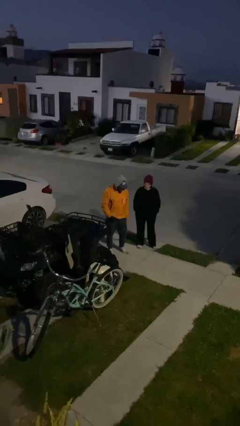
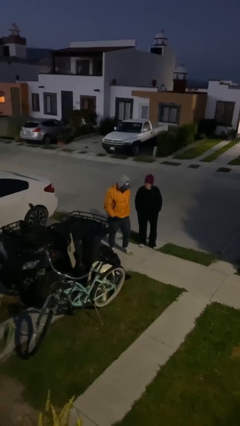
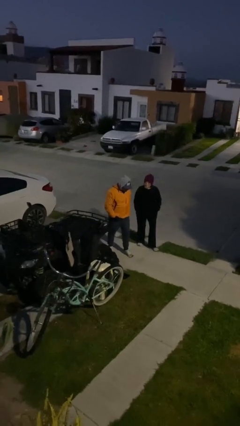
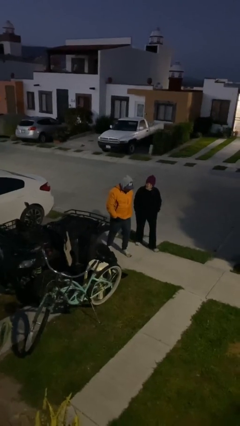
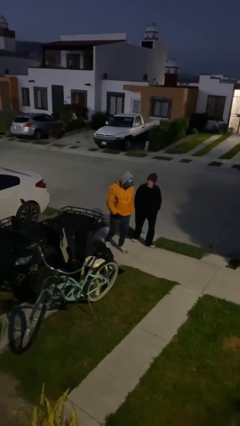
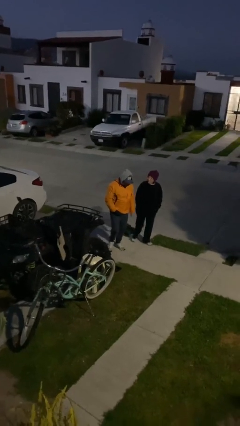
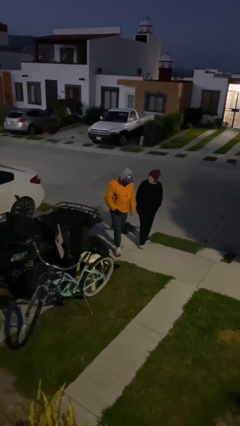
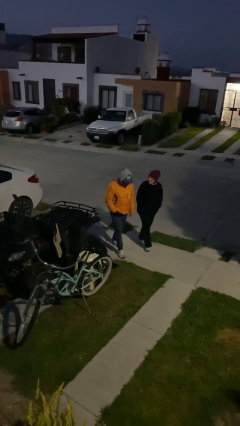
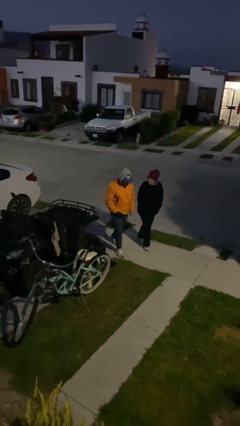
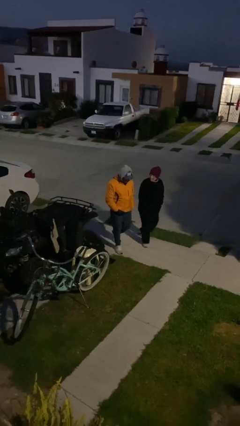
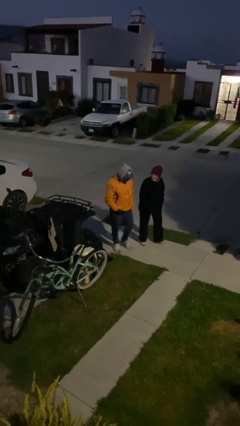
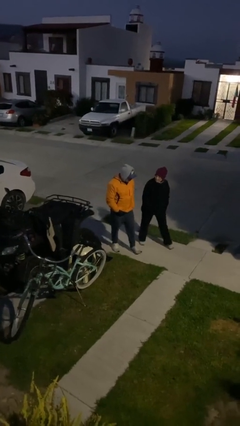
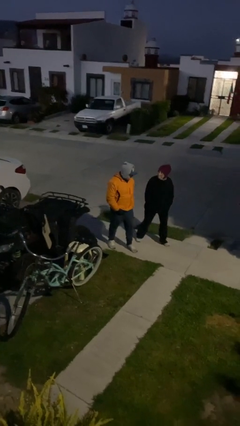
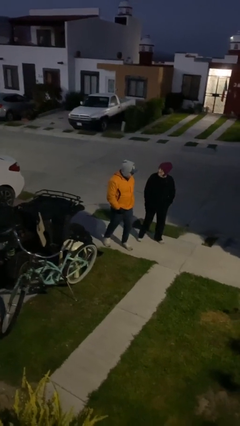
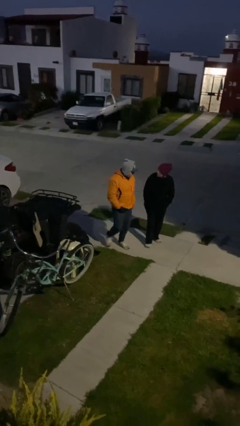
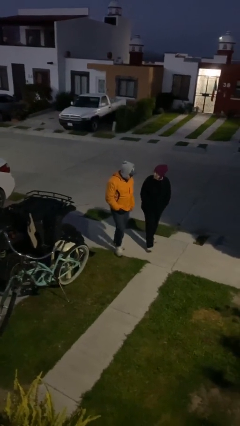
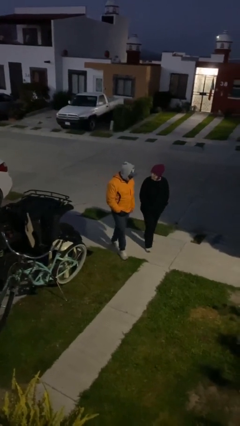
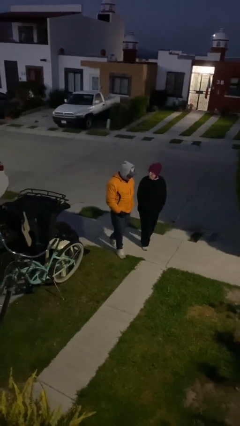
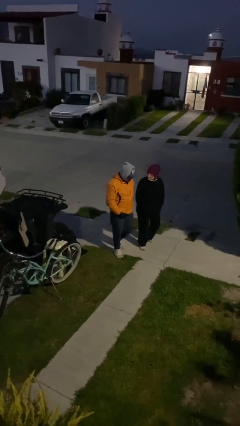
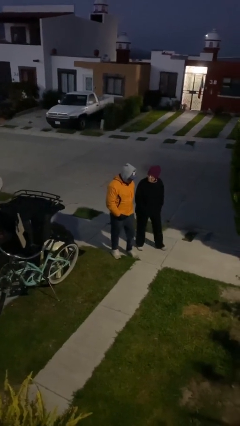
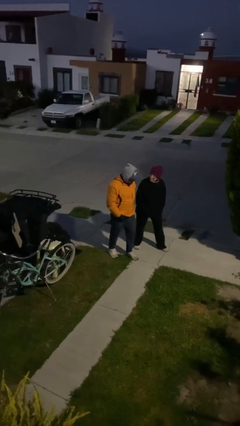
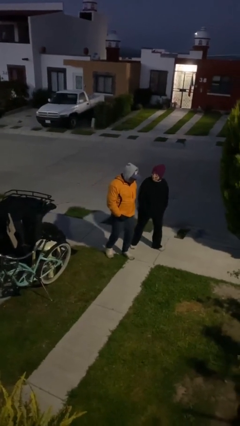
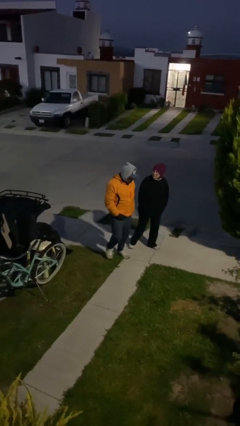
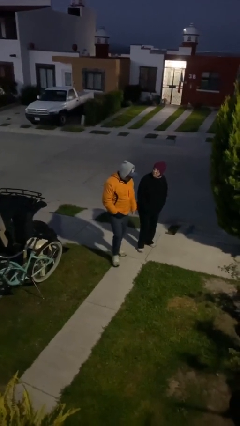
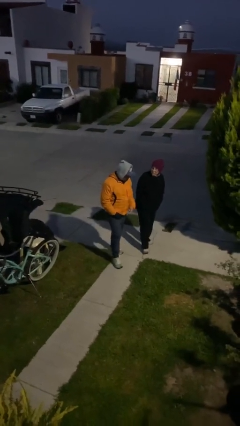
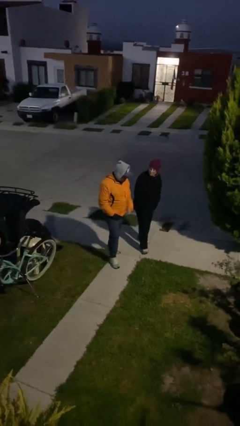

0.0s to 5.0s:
person talks to person

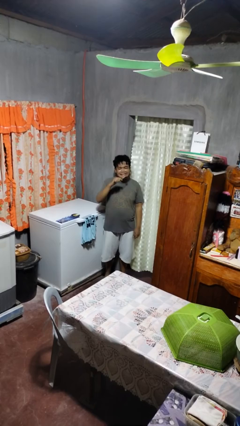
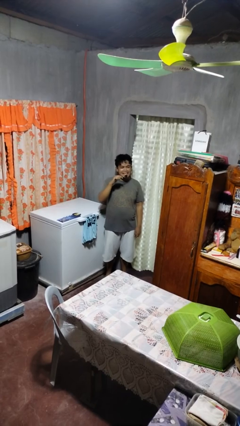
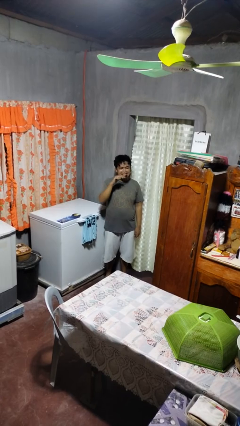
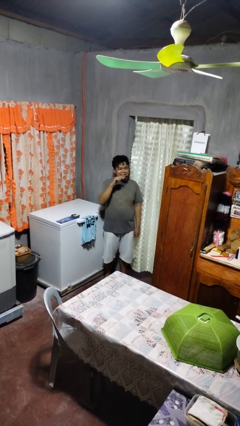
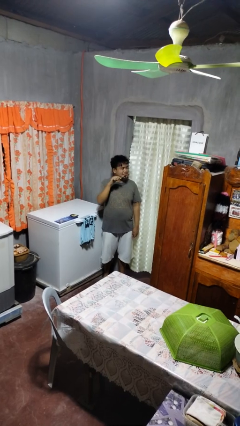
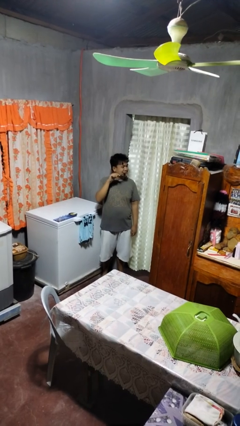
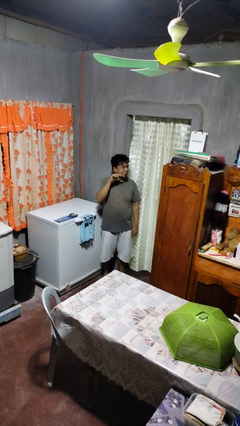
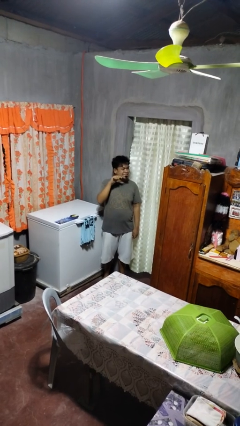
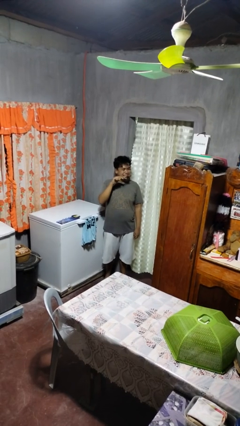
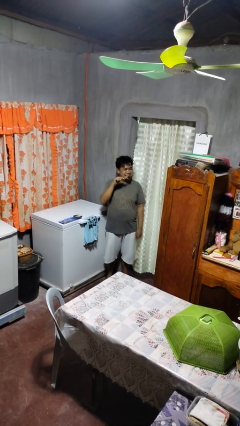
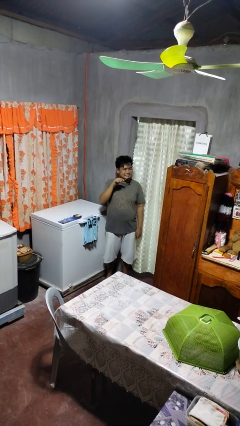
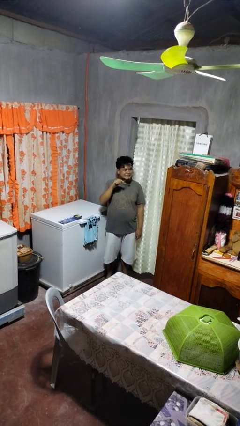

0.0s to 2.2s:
person brushes teeth

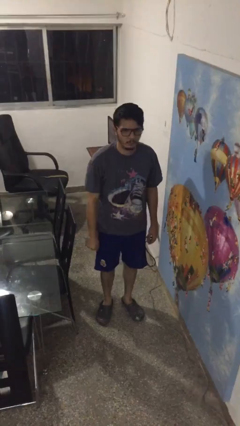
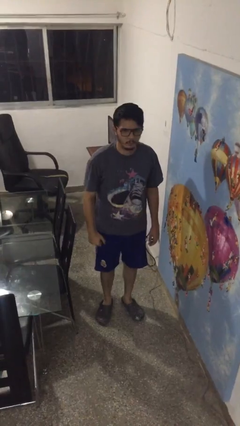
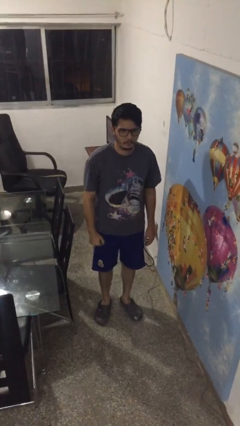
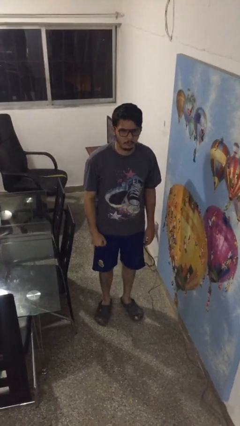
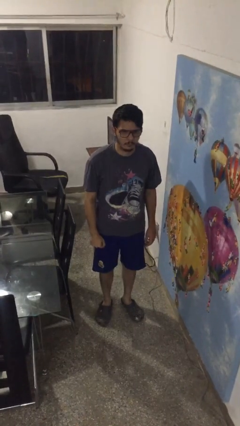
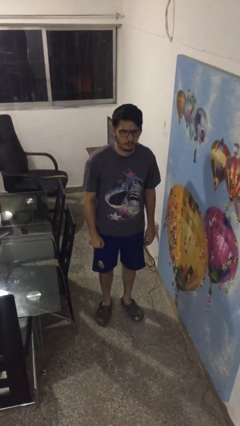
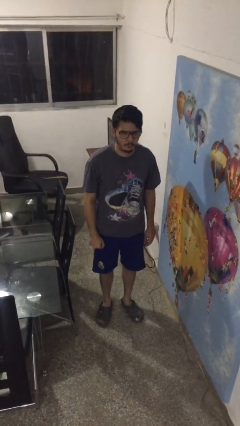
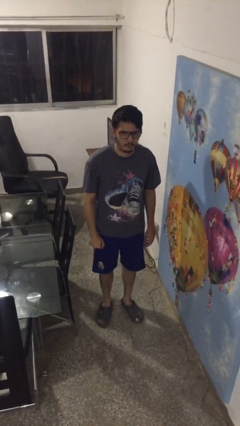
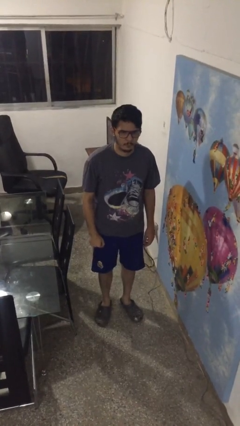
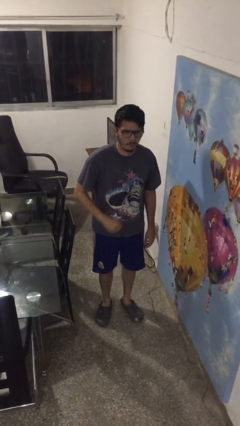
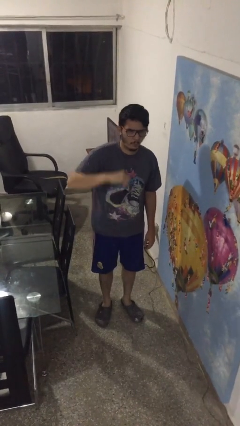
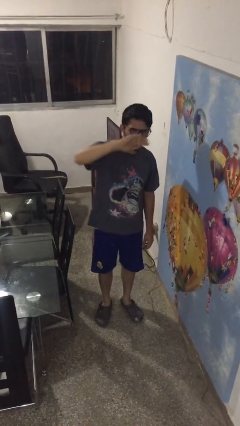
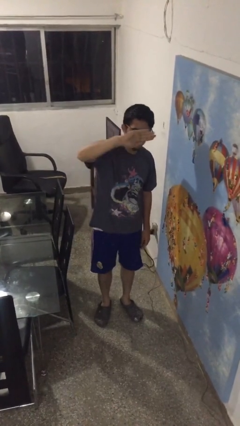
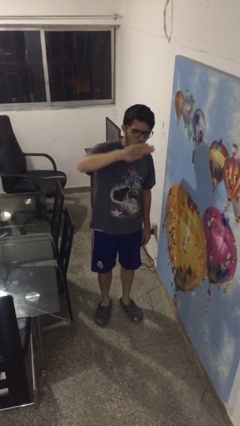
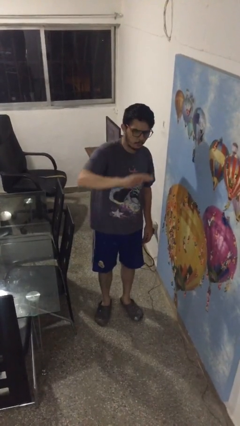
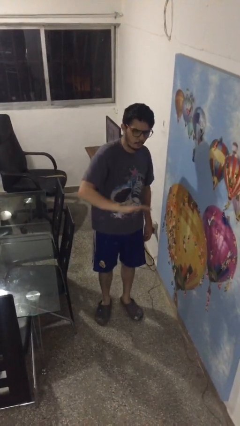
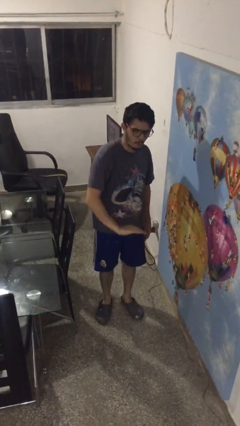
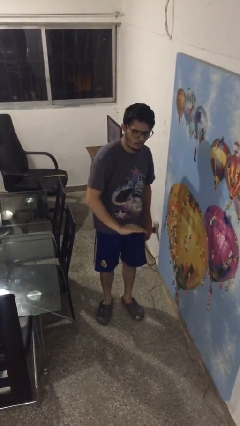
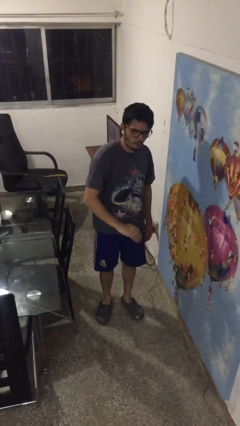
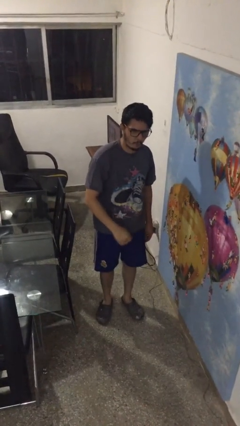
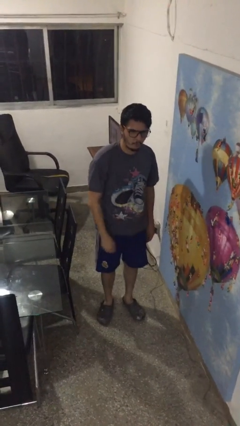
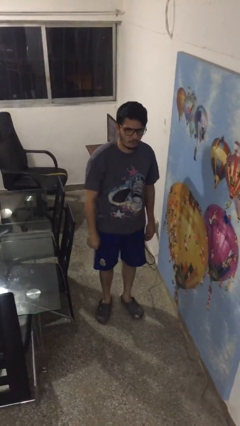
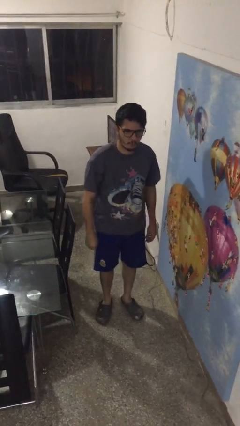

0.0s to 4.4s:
person gestures swipe down

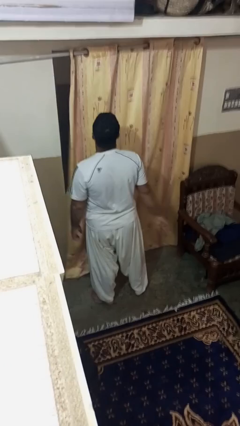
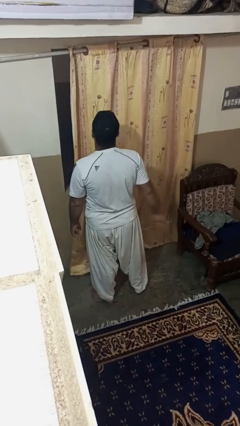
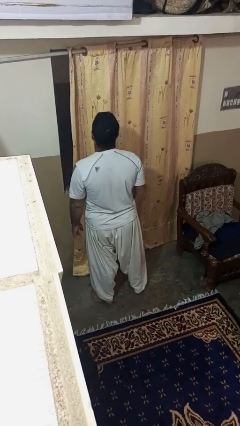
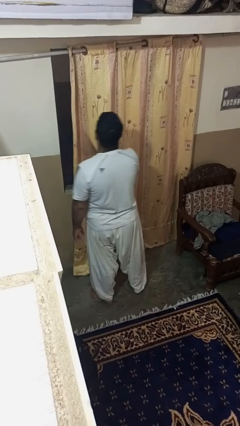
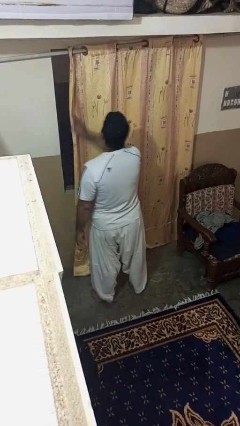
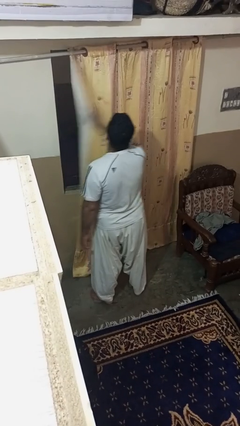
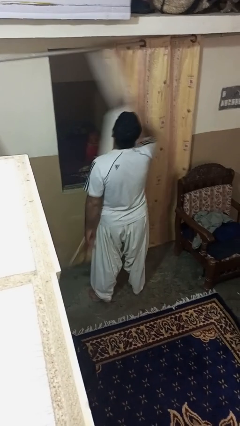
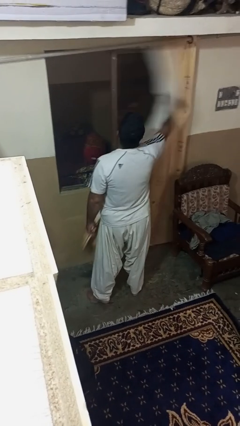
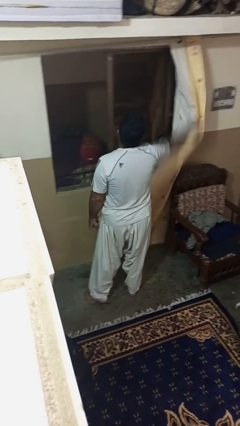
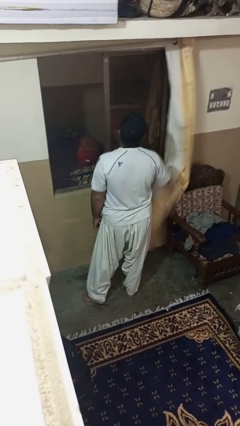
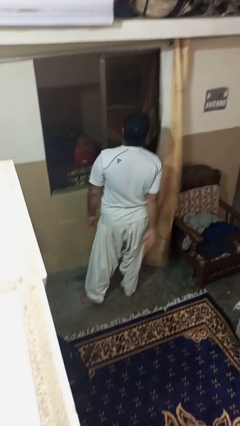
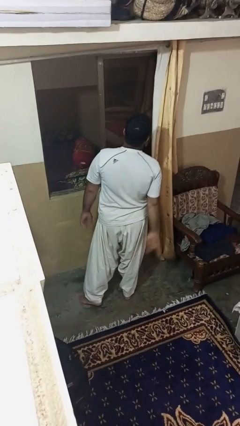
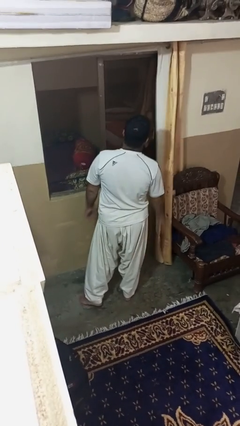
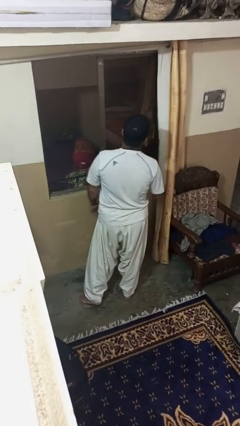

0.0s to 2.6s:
person opens curtains

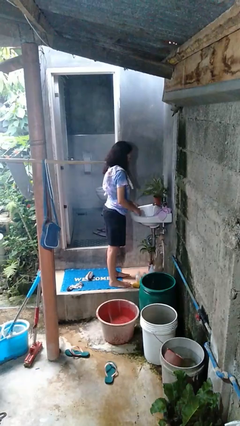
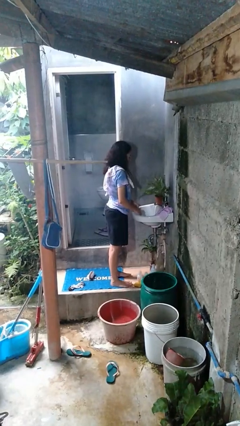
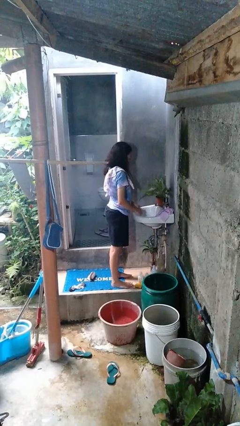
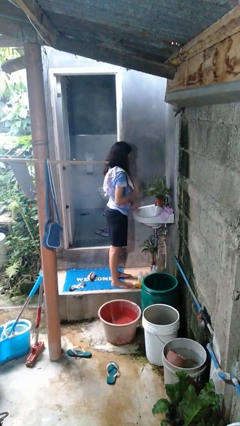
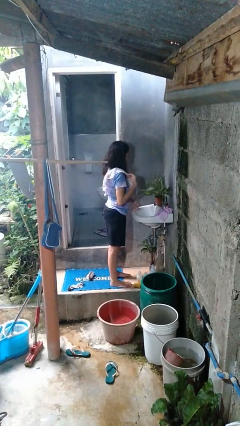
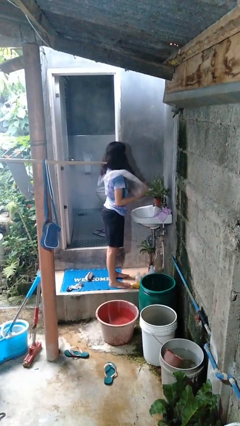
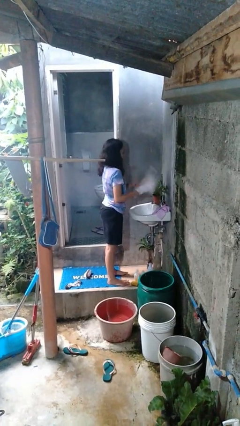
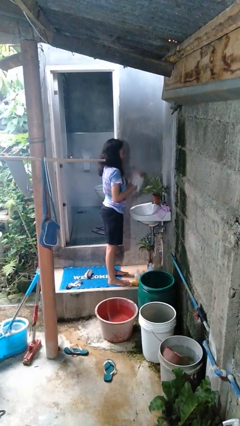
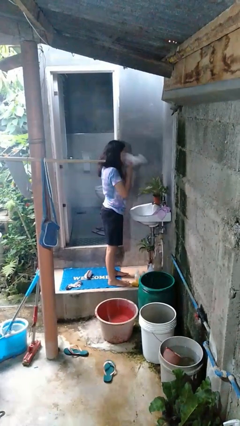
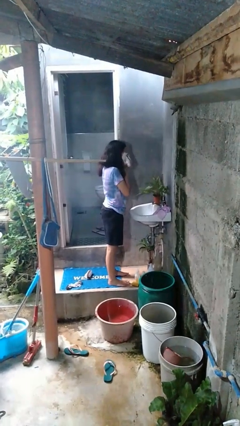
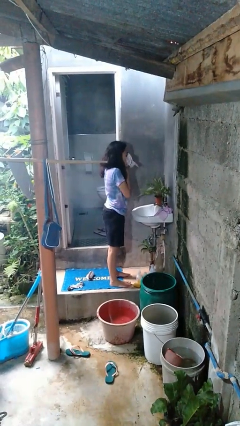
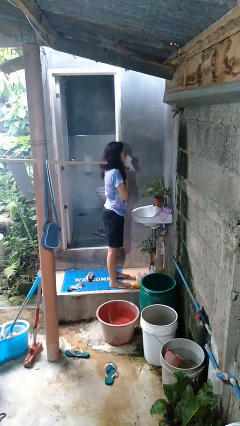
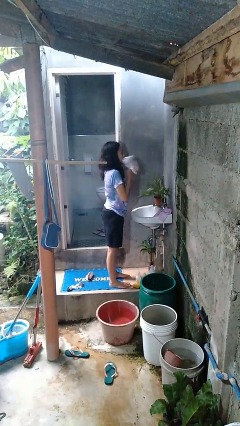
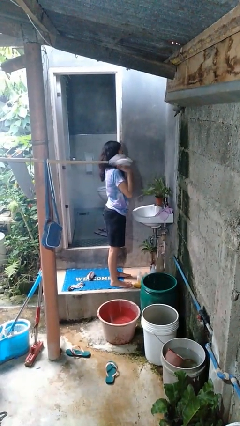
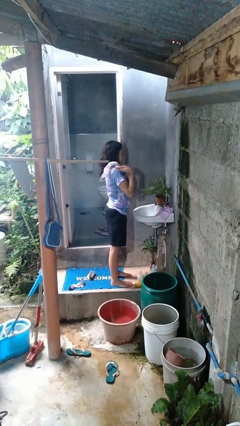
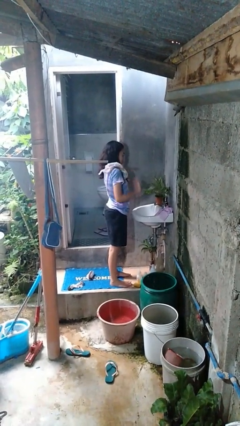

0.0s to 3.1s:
person dries face with towel

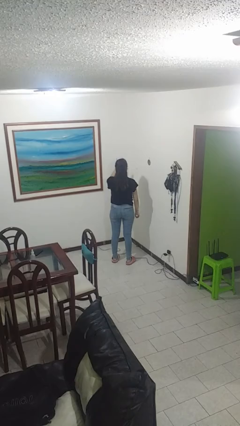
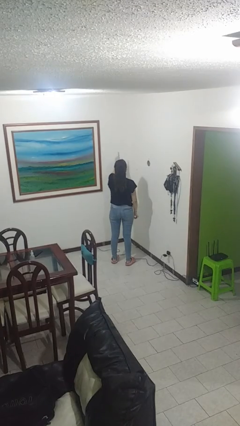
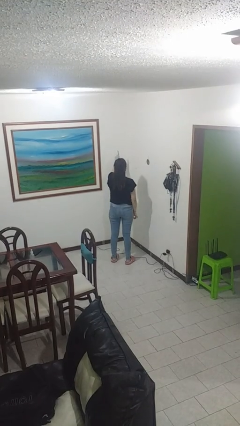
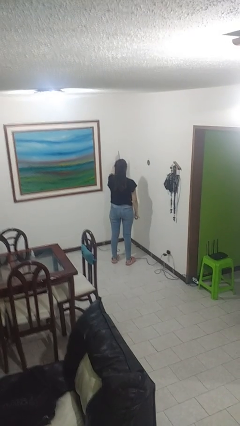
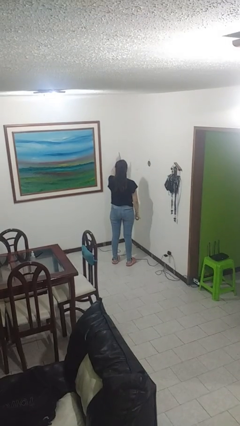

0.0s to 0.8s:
person gestures number one
